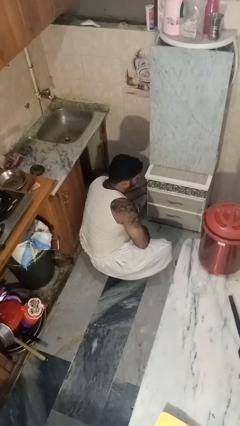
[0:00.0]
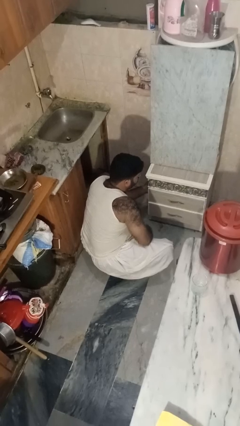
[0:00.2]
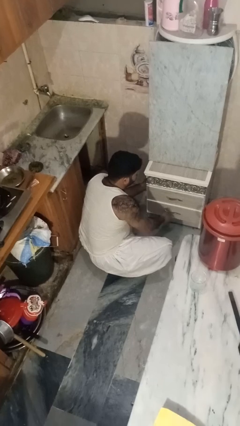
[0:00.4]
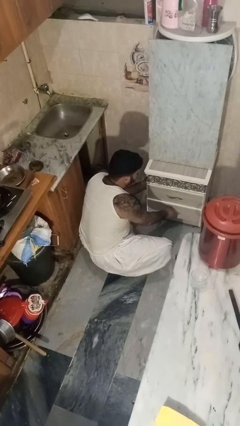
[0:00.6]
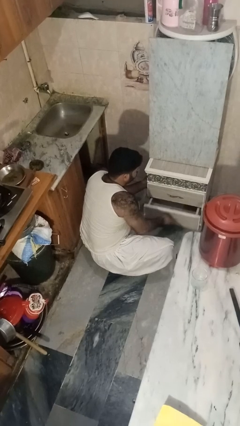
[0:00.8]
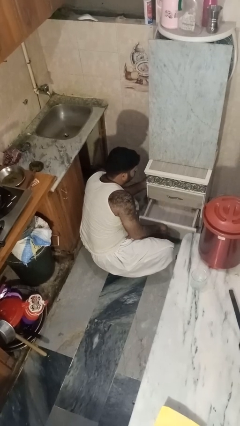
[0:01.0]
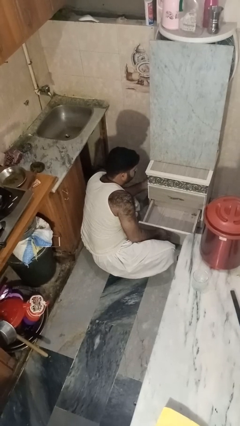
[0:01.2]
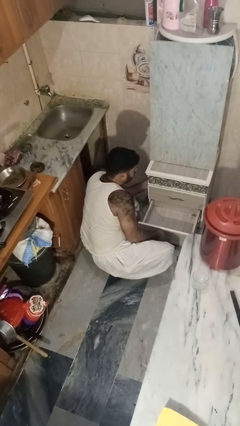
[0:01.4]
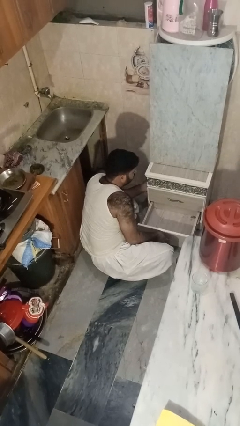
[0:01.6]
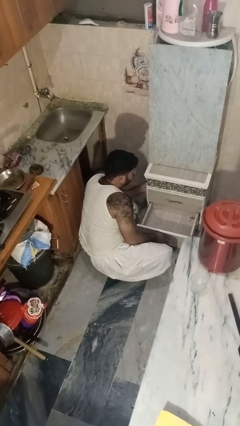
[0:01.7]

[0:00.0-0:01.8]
person opens kitchen drawer

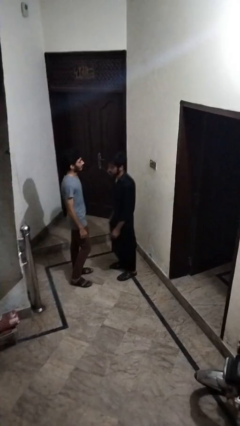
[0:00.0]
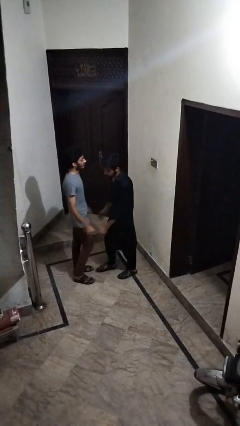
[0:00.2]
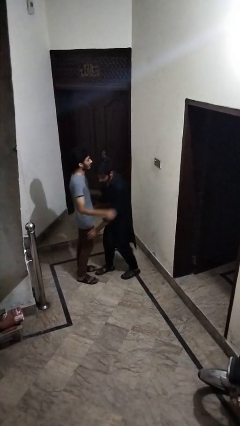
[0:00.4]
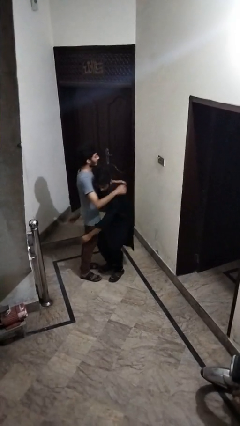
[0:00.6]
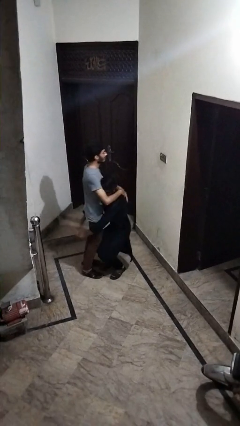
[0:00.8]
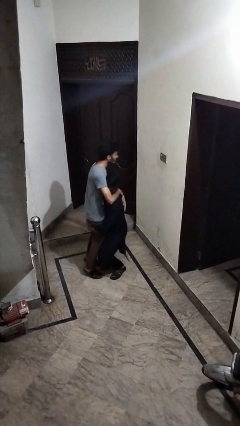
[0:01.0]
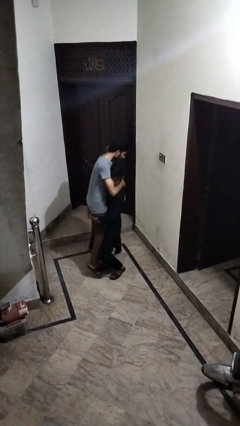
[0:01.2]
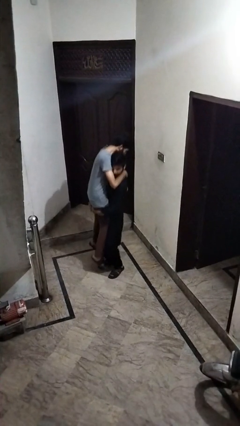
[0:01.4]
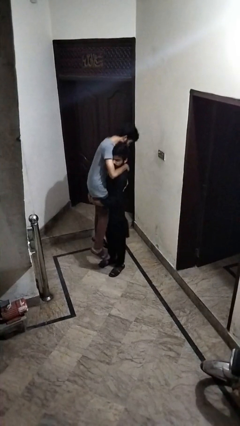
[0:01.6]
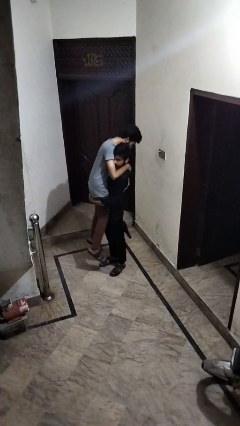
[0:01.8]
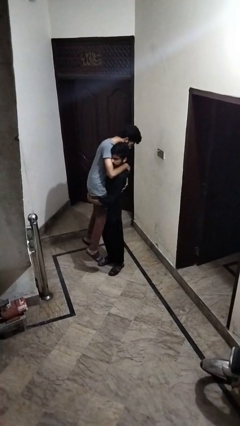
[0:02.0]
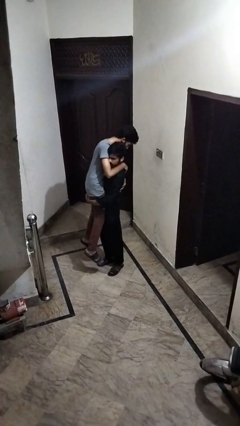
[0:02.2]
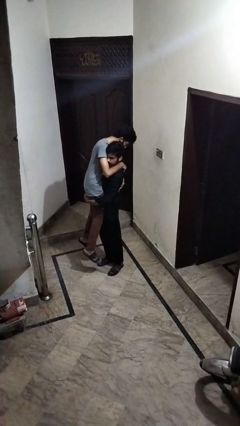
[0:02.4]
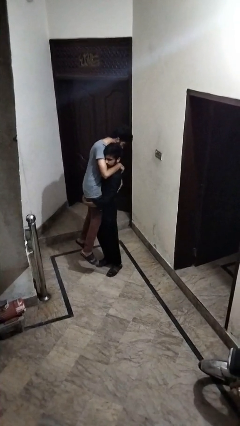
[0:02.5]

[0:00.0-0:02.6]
person picks up person

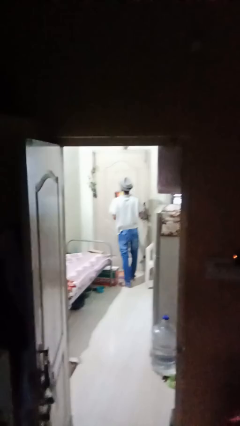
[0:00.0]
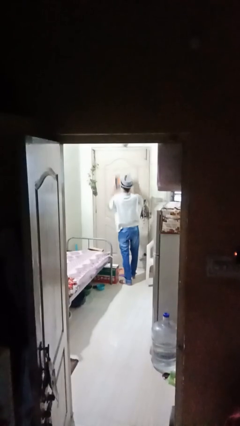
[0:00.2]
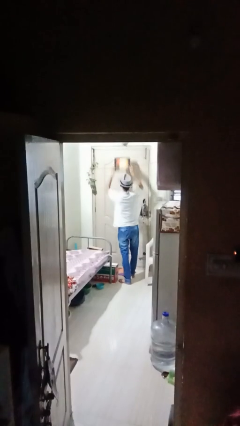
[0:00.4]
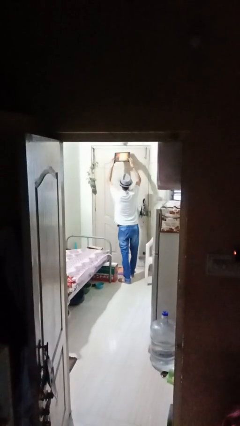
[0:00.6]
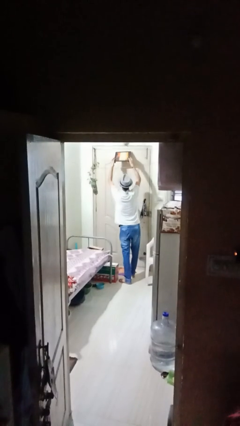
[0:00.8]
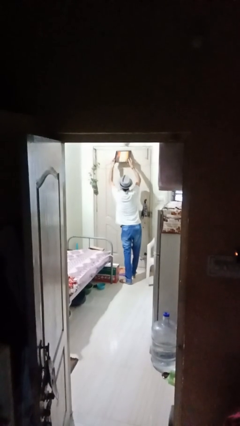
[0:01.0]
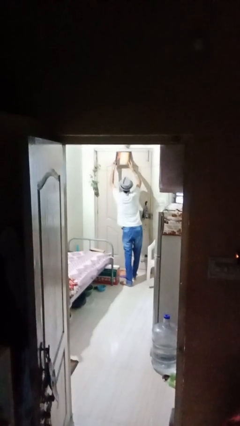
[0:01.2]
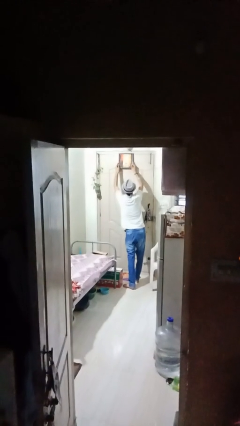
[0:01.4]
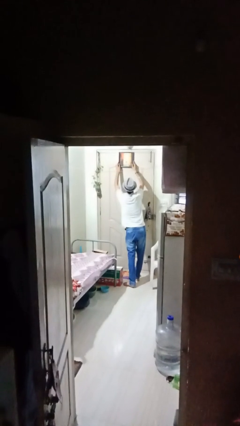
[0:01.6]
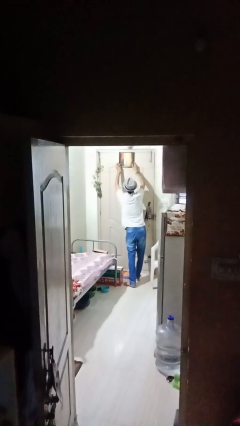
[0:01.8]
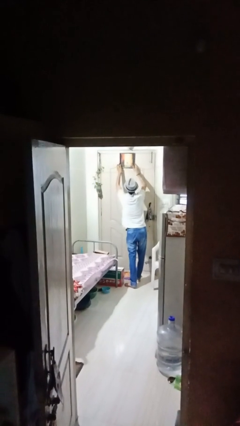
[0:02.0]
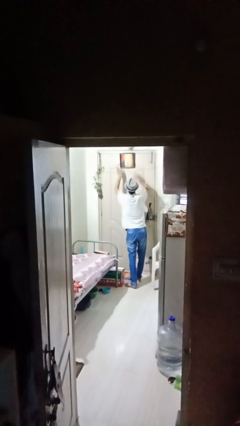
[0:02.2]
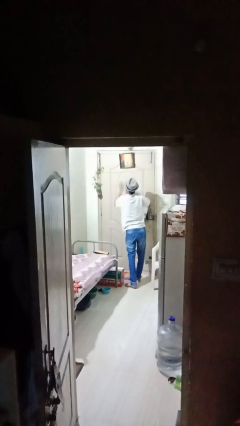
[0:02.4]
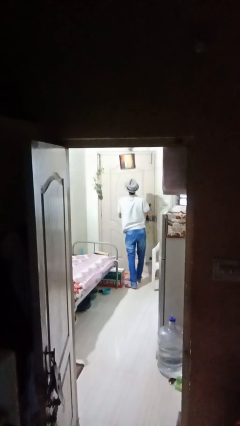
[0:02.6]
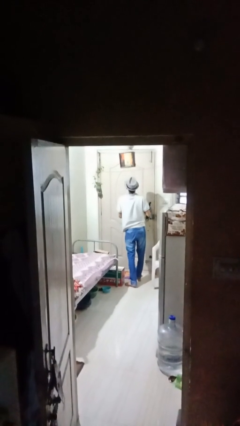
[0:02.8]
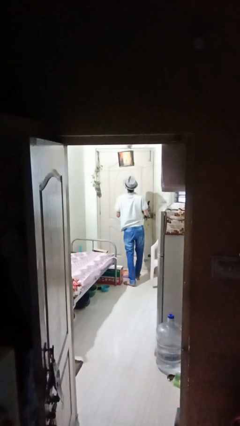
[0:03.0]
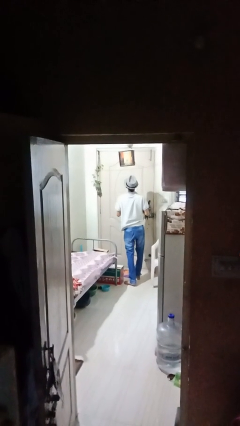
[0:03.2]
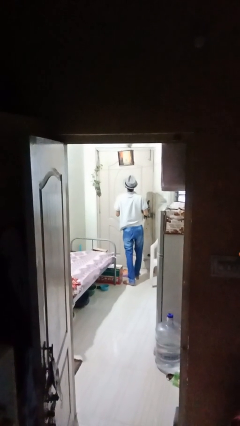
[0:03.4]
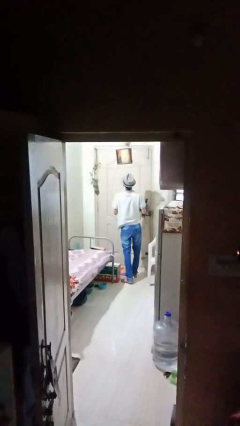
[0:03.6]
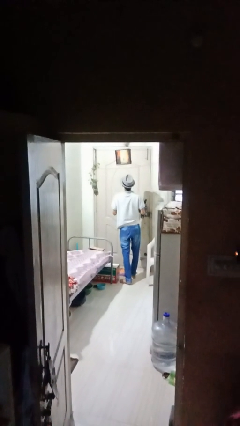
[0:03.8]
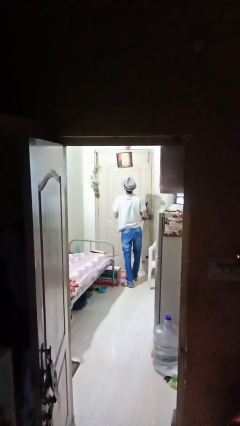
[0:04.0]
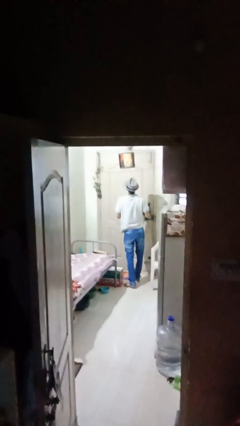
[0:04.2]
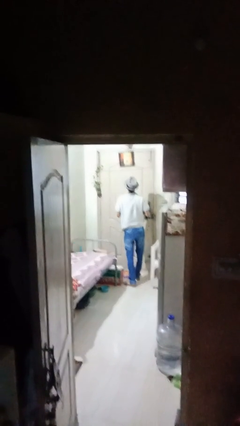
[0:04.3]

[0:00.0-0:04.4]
person puts up picture frame

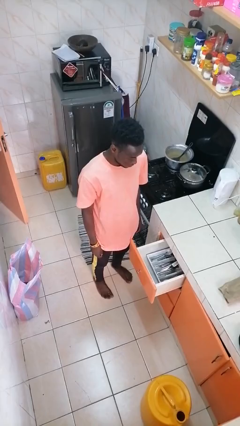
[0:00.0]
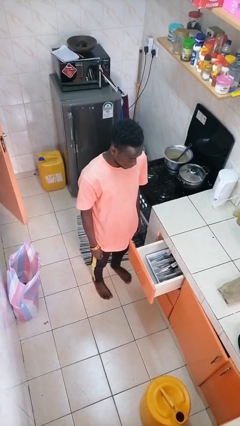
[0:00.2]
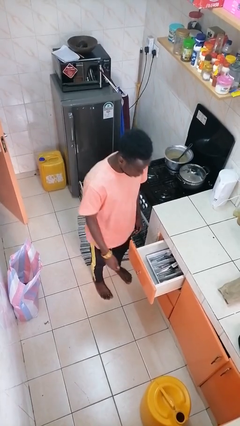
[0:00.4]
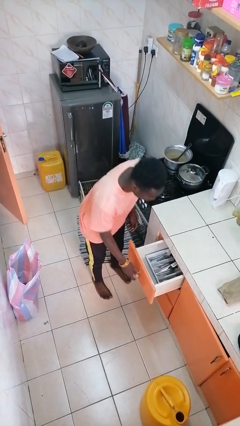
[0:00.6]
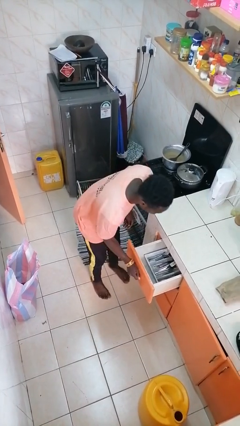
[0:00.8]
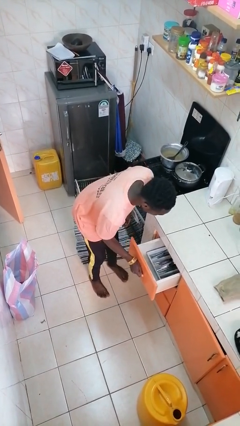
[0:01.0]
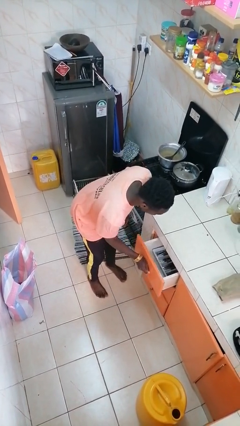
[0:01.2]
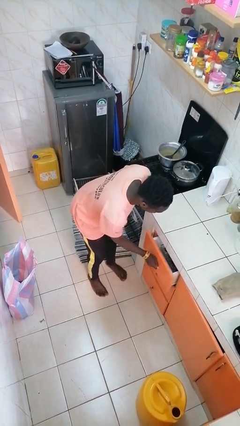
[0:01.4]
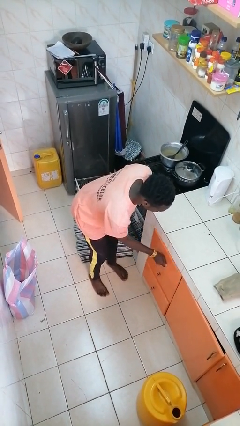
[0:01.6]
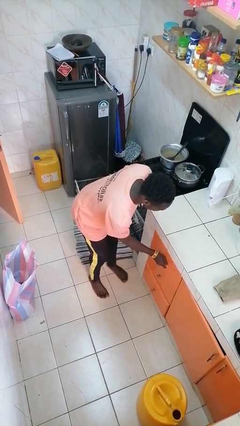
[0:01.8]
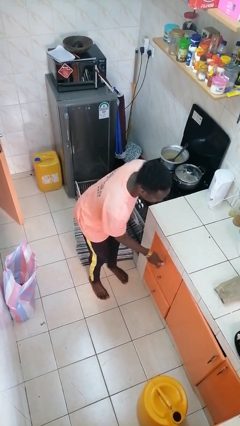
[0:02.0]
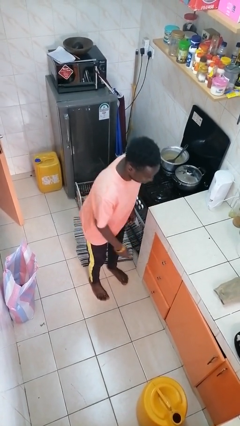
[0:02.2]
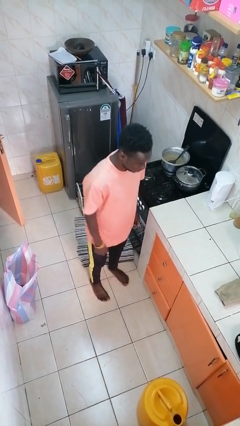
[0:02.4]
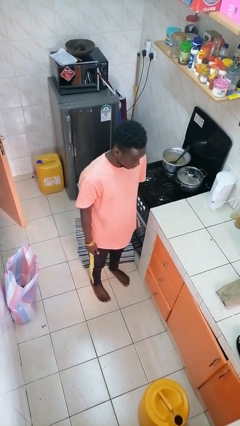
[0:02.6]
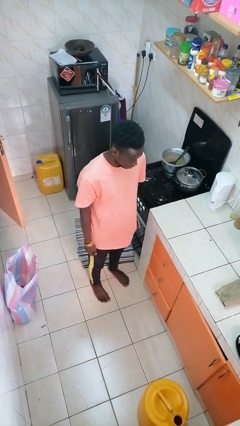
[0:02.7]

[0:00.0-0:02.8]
person closes kitchen drawer

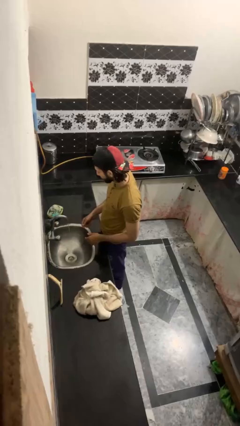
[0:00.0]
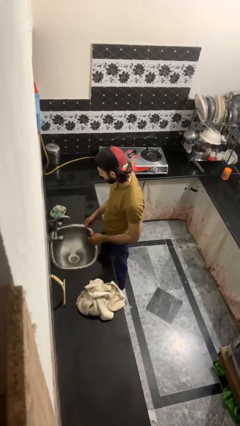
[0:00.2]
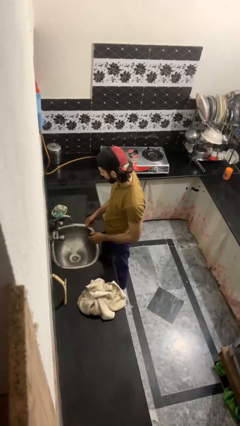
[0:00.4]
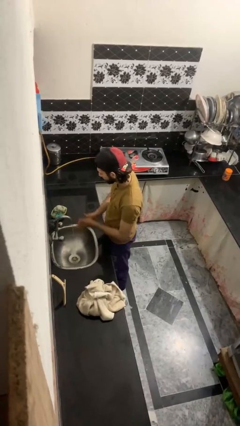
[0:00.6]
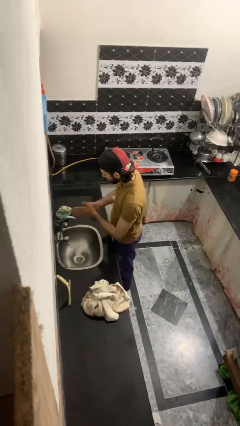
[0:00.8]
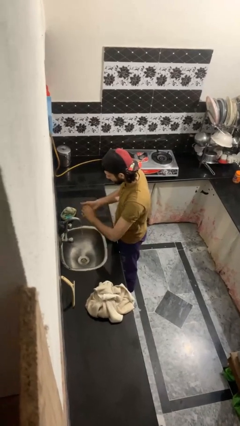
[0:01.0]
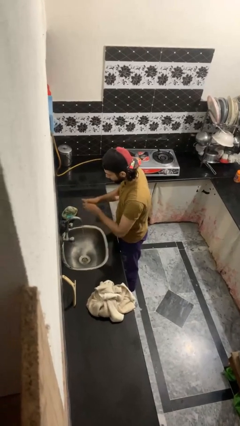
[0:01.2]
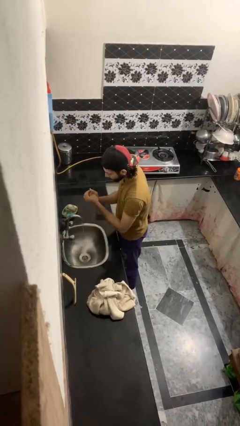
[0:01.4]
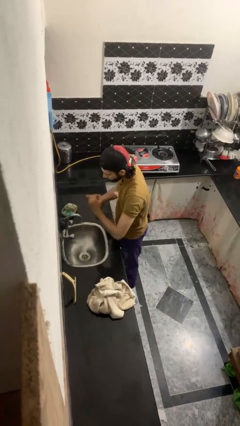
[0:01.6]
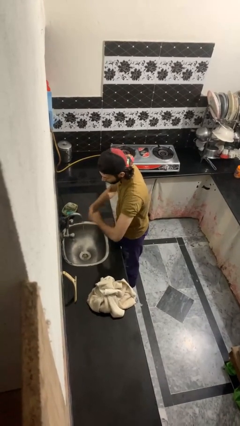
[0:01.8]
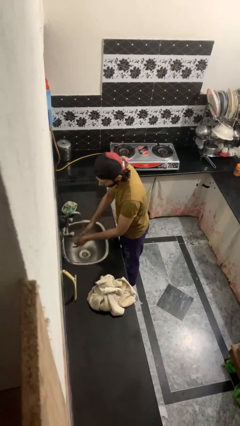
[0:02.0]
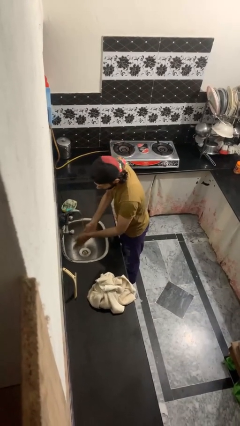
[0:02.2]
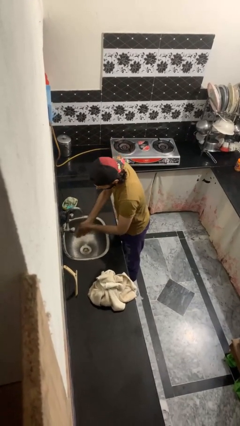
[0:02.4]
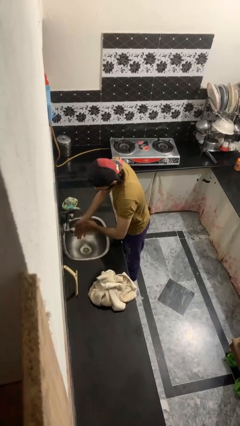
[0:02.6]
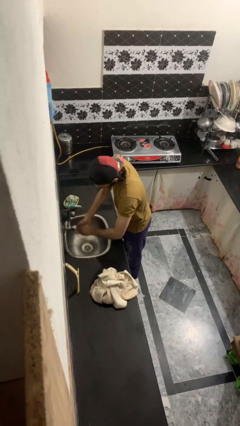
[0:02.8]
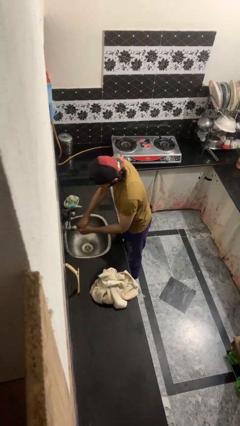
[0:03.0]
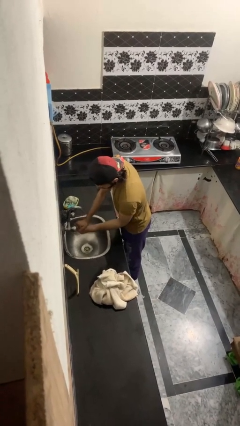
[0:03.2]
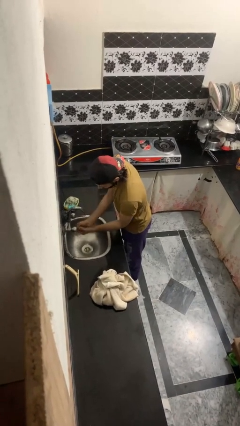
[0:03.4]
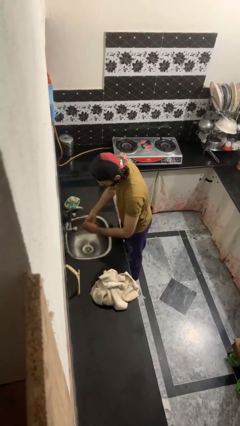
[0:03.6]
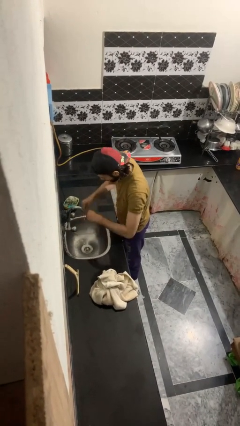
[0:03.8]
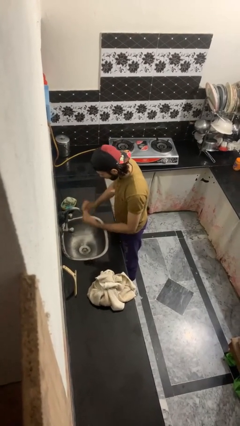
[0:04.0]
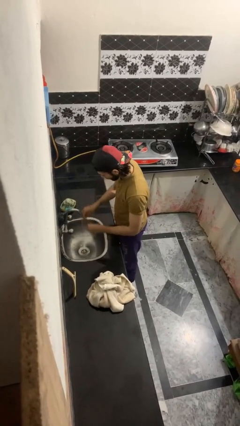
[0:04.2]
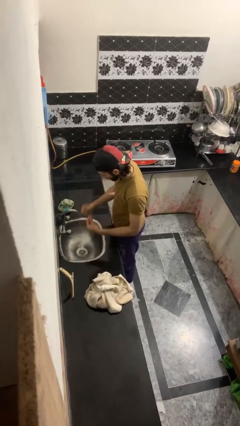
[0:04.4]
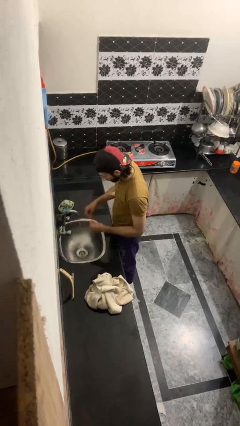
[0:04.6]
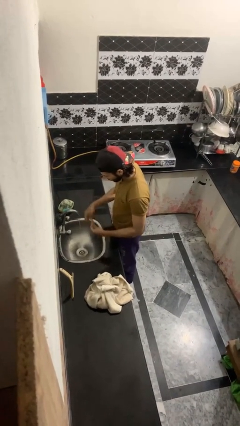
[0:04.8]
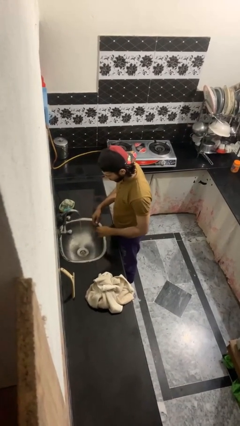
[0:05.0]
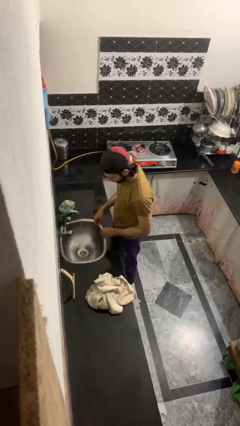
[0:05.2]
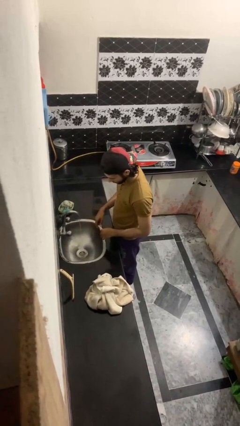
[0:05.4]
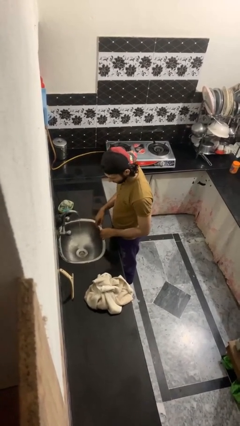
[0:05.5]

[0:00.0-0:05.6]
person washes hands

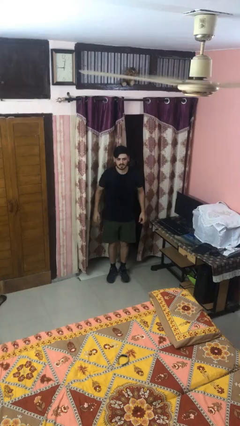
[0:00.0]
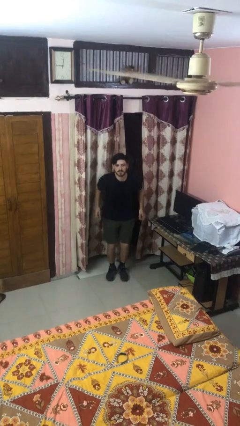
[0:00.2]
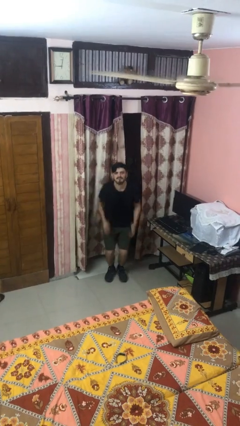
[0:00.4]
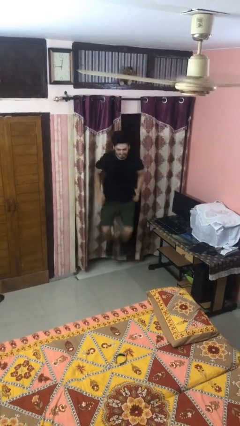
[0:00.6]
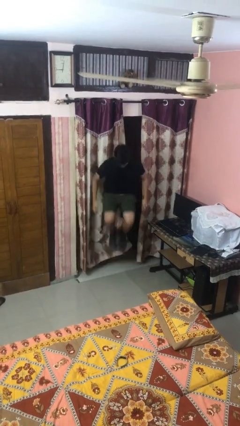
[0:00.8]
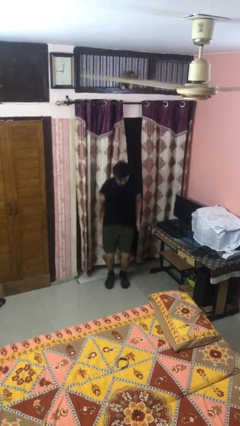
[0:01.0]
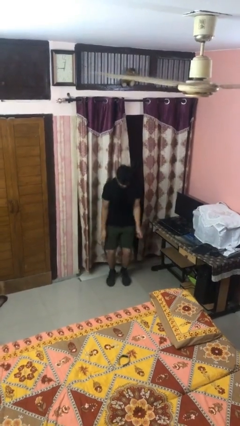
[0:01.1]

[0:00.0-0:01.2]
person jumps
